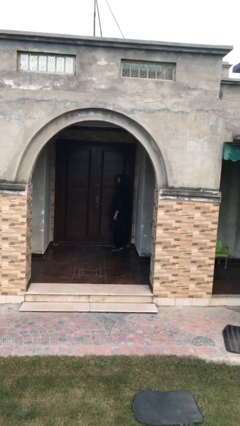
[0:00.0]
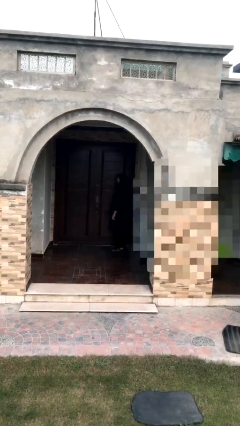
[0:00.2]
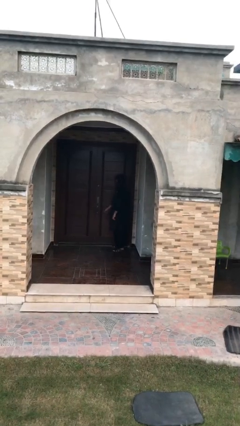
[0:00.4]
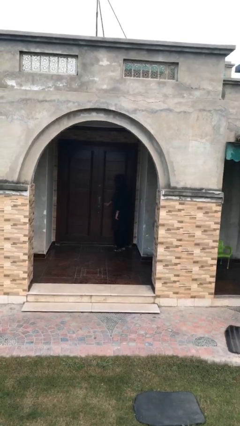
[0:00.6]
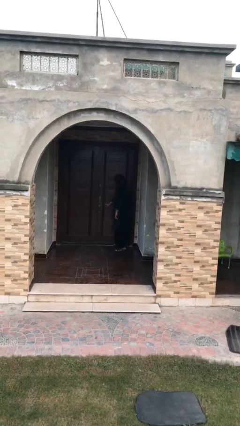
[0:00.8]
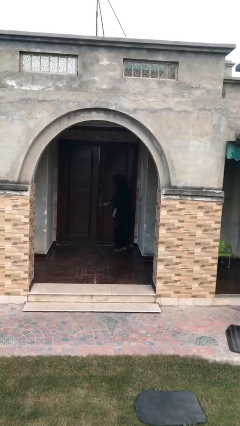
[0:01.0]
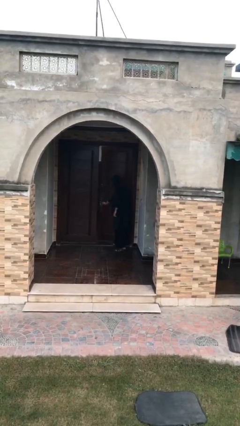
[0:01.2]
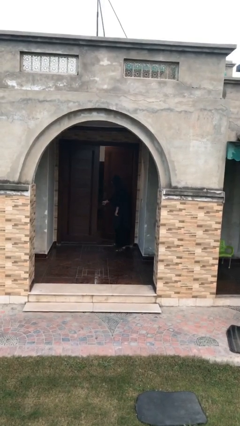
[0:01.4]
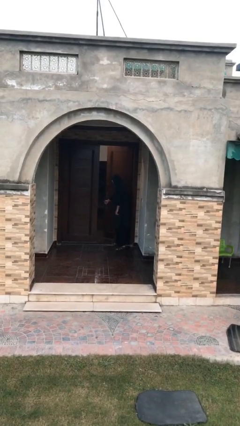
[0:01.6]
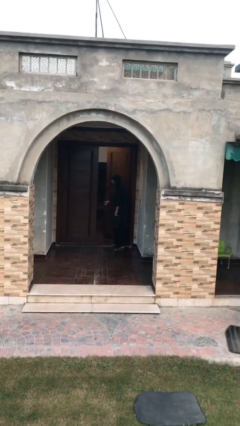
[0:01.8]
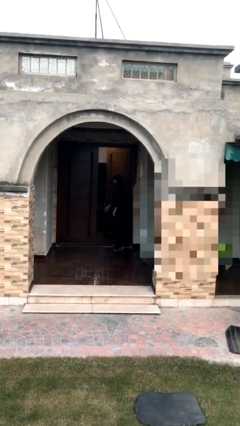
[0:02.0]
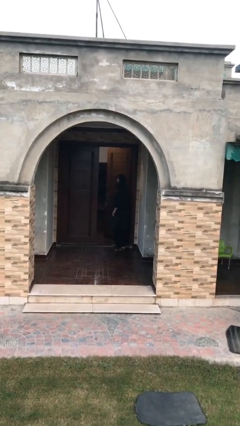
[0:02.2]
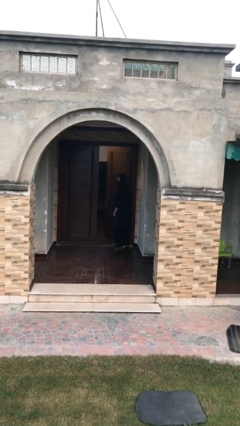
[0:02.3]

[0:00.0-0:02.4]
person opens facility door

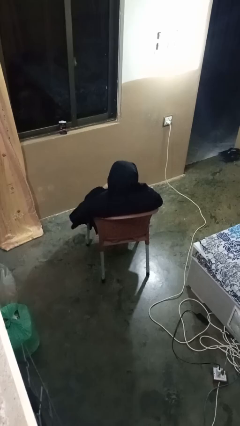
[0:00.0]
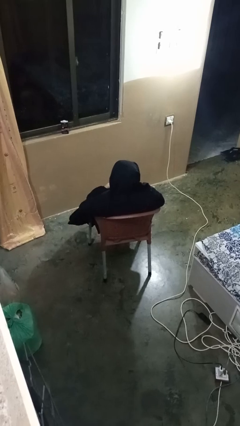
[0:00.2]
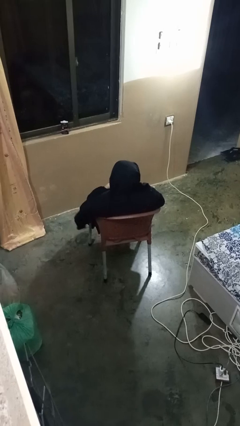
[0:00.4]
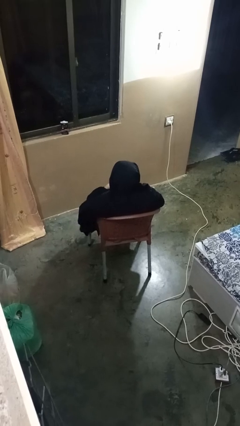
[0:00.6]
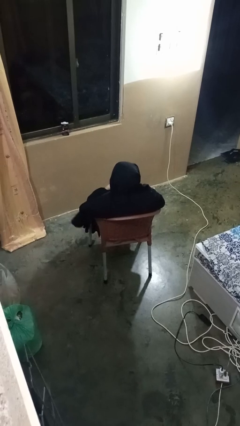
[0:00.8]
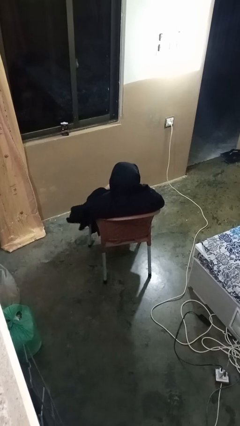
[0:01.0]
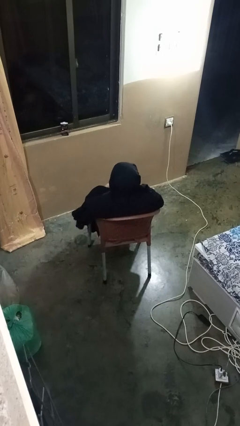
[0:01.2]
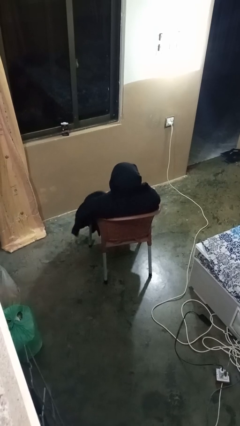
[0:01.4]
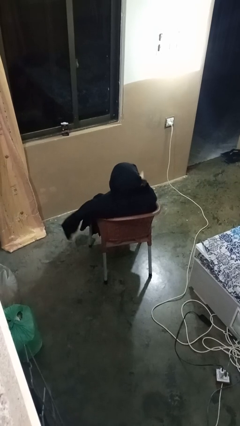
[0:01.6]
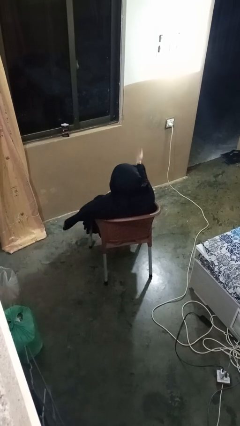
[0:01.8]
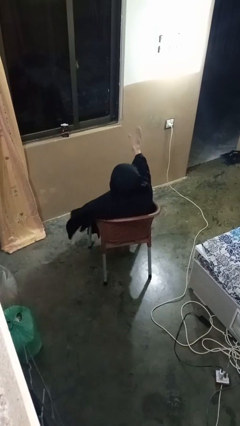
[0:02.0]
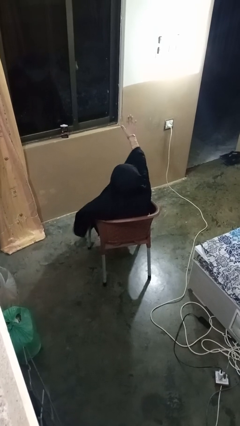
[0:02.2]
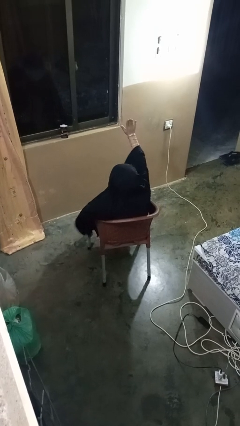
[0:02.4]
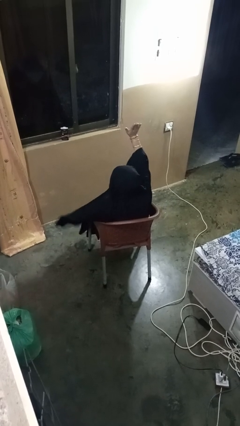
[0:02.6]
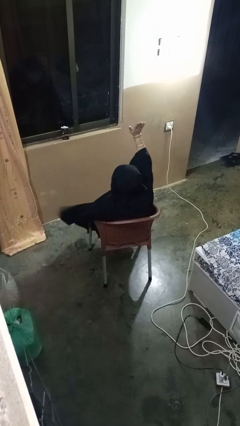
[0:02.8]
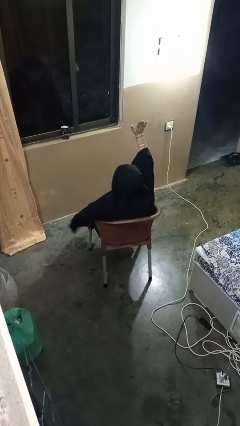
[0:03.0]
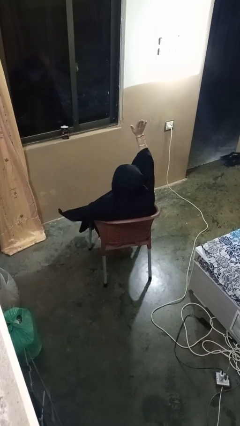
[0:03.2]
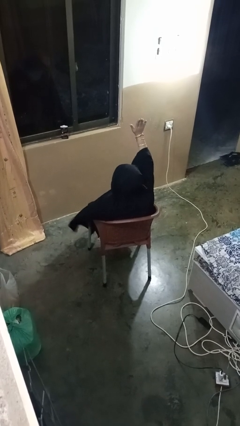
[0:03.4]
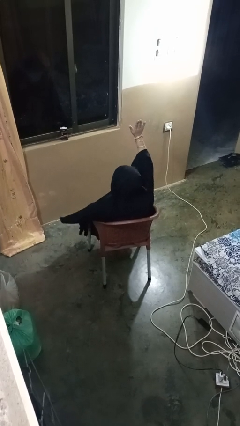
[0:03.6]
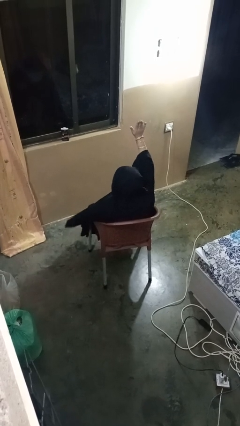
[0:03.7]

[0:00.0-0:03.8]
person gestures raise hand

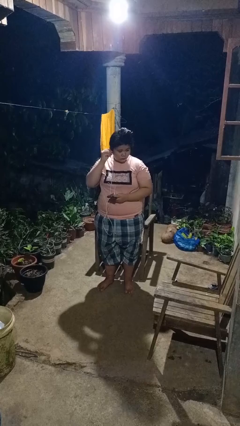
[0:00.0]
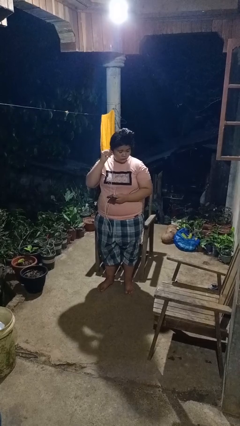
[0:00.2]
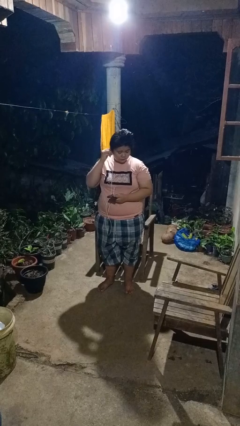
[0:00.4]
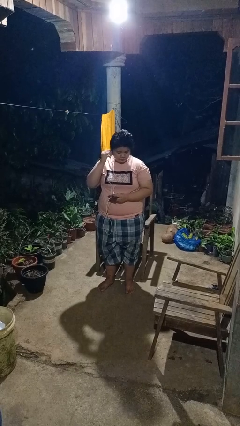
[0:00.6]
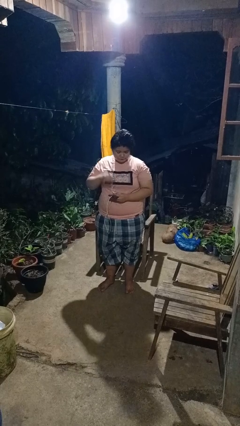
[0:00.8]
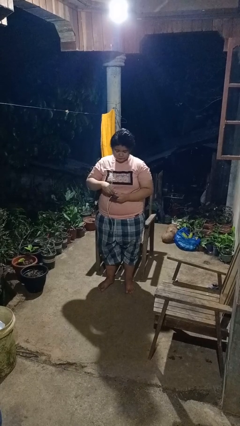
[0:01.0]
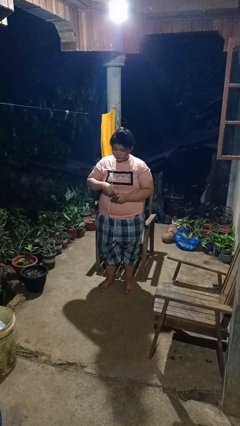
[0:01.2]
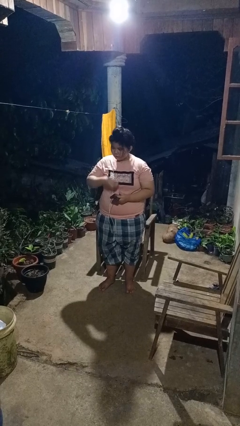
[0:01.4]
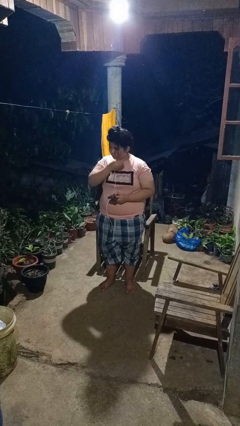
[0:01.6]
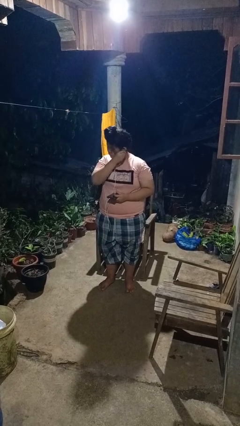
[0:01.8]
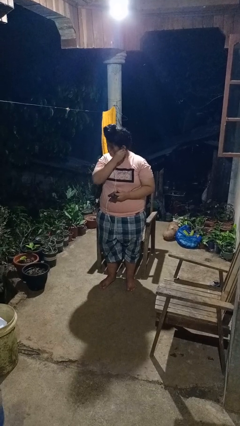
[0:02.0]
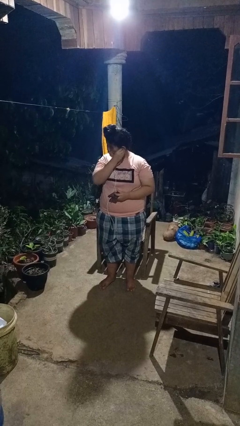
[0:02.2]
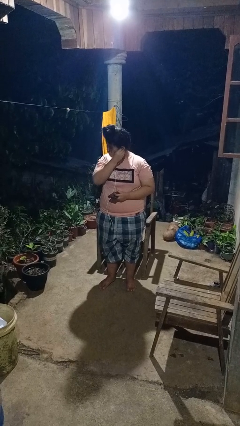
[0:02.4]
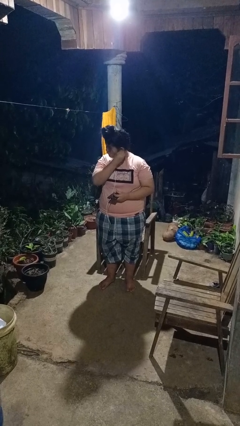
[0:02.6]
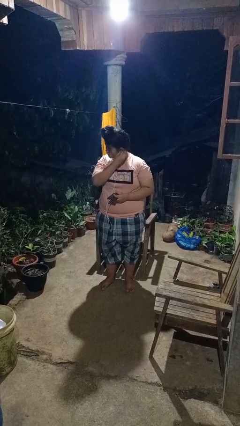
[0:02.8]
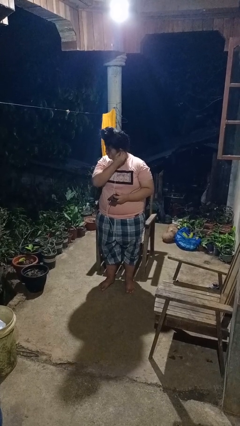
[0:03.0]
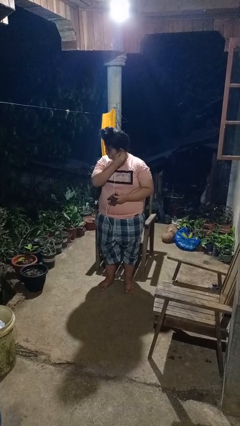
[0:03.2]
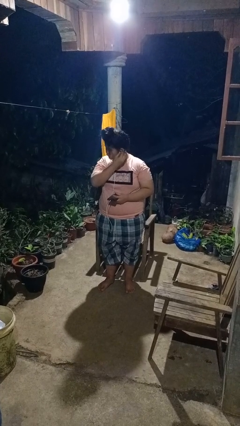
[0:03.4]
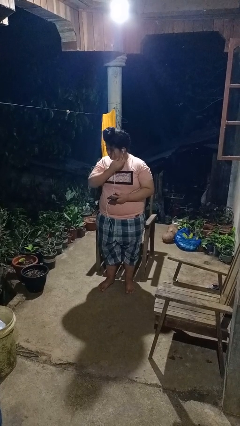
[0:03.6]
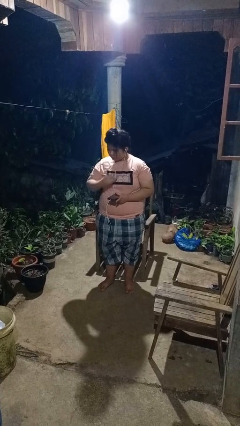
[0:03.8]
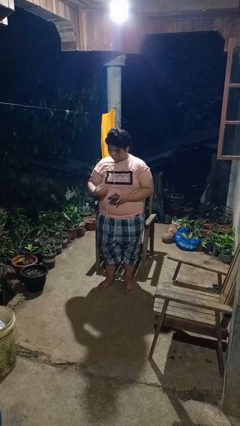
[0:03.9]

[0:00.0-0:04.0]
person puts on headphones

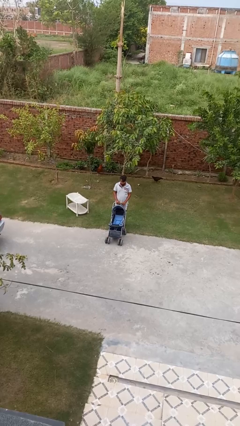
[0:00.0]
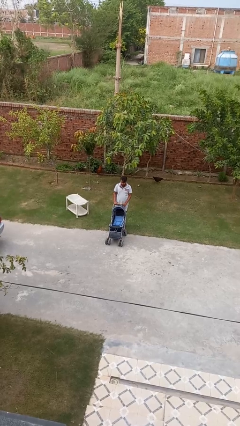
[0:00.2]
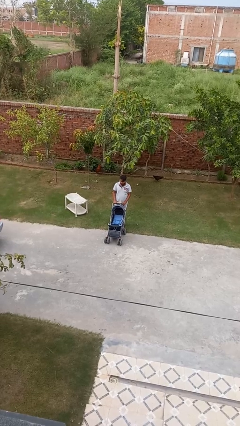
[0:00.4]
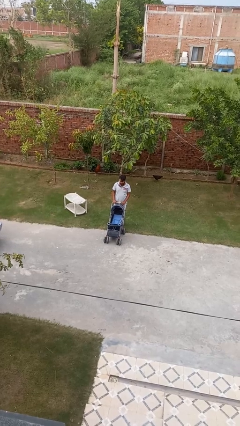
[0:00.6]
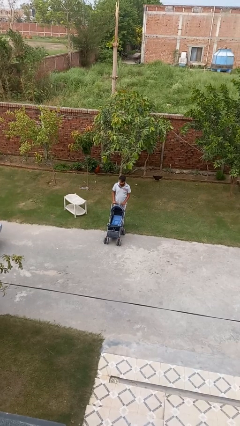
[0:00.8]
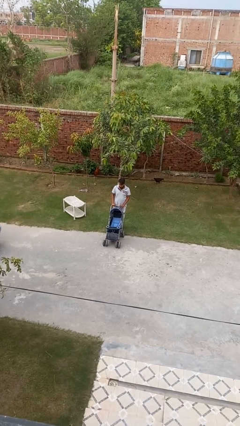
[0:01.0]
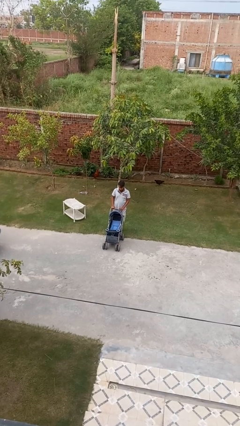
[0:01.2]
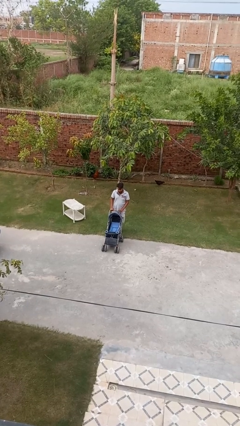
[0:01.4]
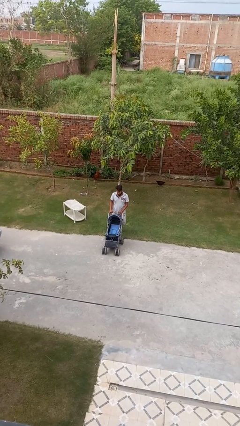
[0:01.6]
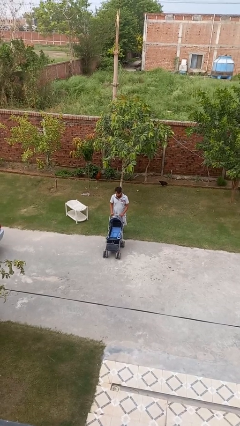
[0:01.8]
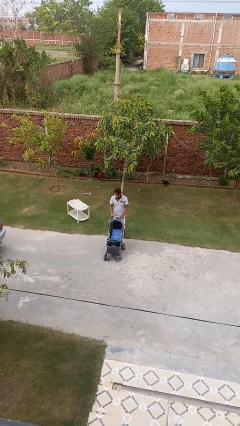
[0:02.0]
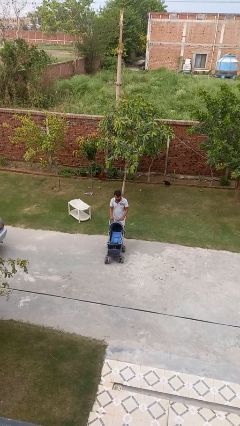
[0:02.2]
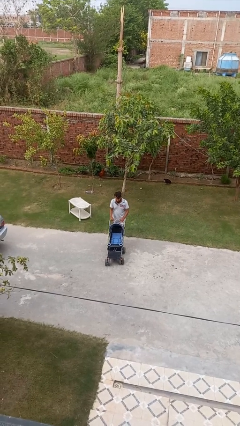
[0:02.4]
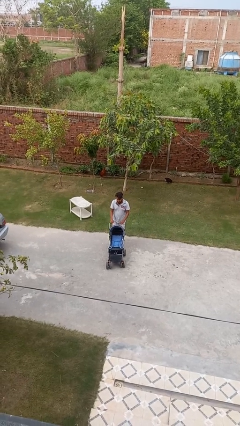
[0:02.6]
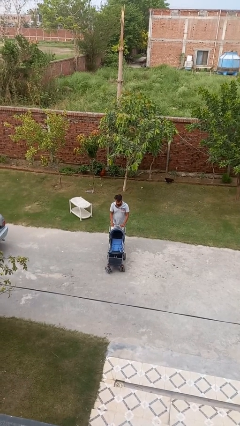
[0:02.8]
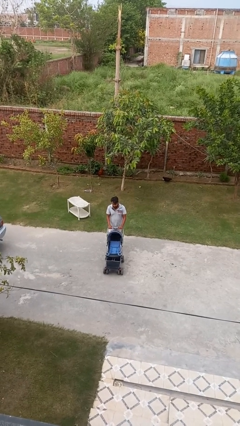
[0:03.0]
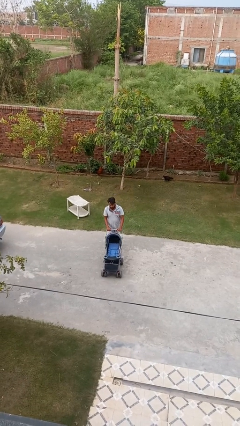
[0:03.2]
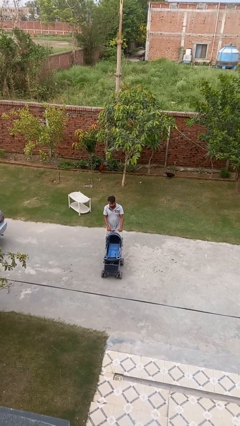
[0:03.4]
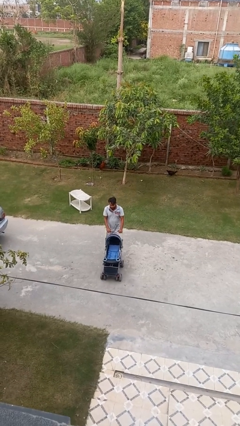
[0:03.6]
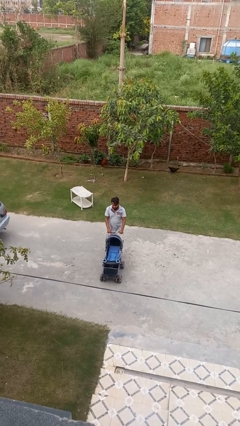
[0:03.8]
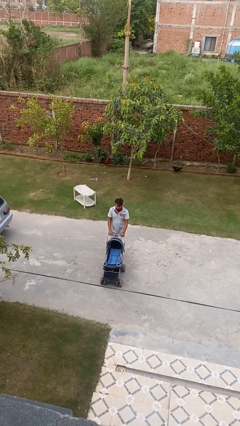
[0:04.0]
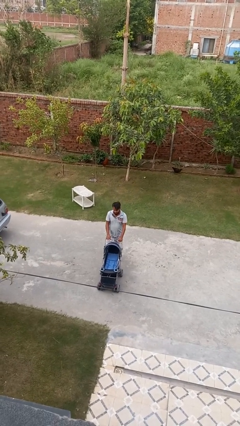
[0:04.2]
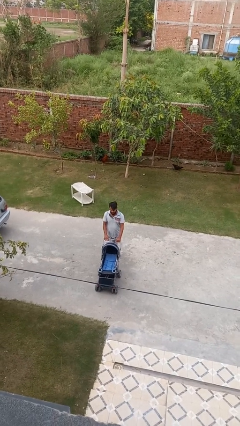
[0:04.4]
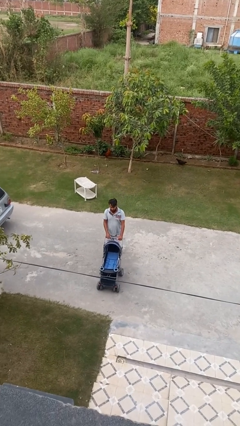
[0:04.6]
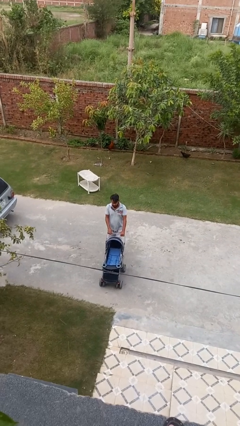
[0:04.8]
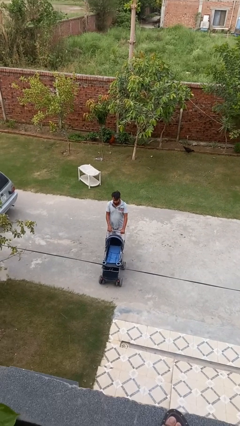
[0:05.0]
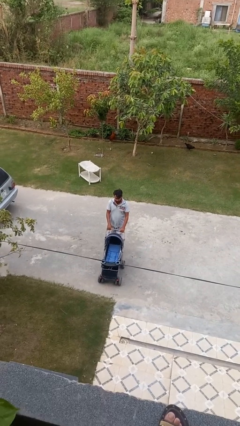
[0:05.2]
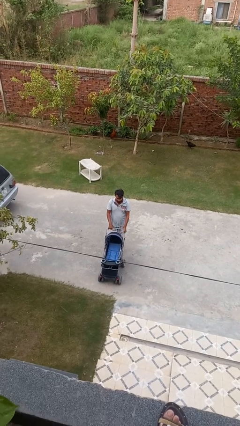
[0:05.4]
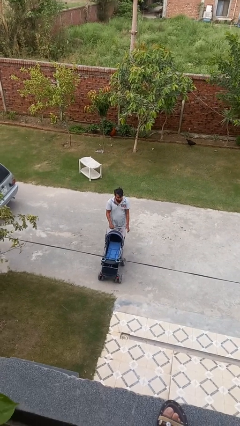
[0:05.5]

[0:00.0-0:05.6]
person pushes wheeled cart

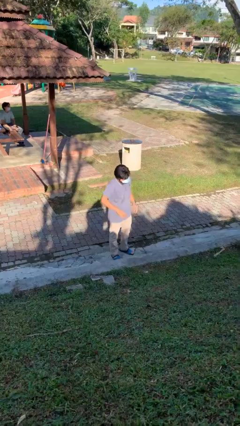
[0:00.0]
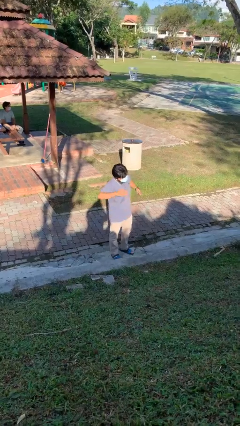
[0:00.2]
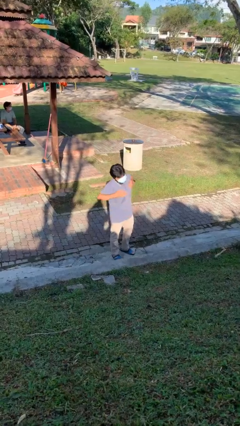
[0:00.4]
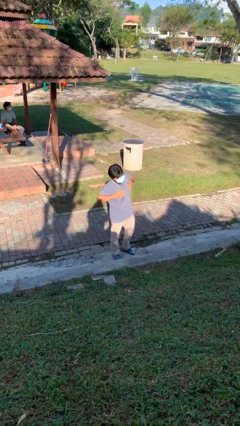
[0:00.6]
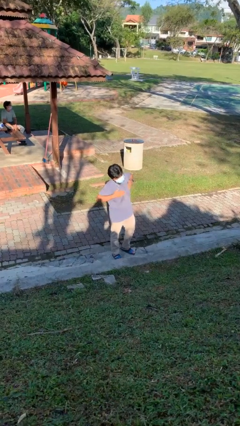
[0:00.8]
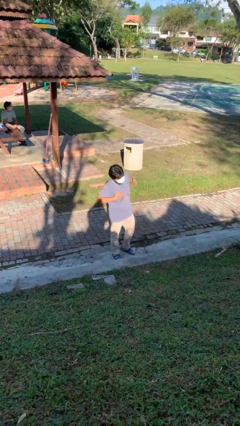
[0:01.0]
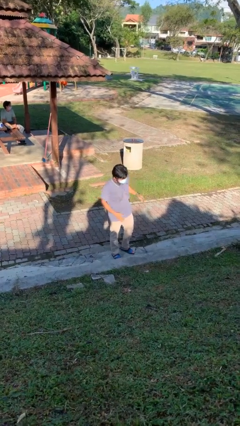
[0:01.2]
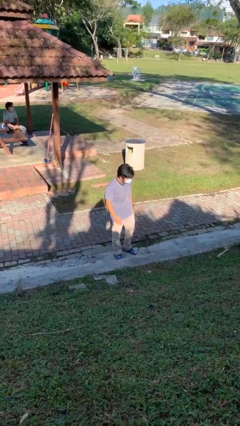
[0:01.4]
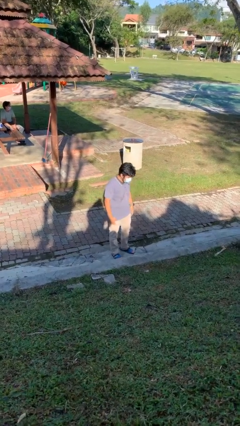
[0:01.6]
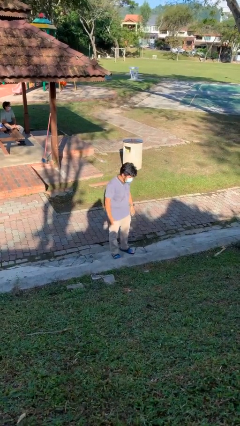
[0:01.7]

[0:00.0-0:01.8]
person drums on chest
